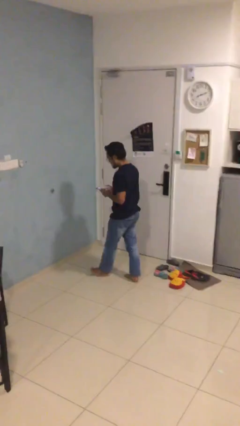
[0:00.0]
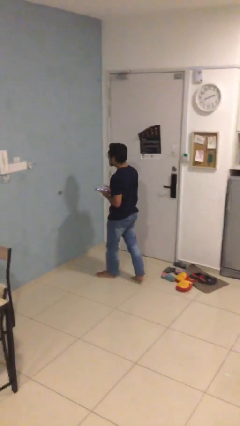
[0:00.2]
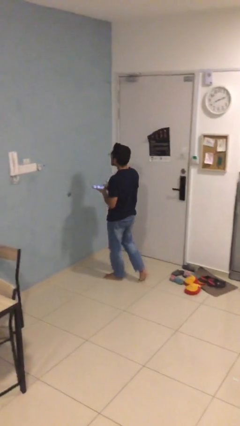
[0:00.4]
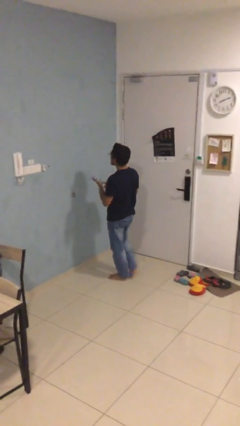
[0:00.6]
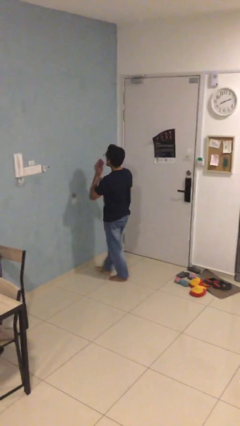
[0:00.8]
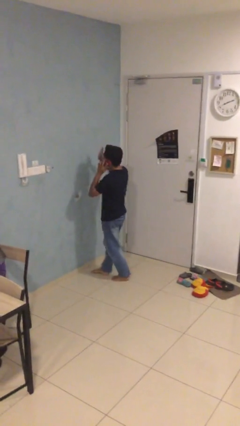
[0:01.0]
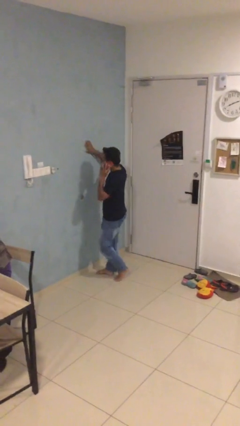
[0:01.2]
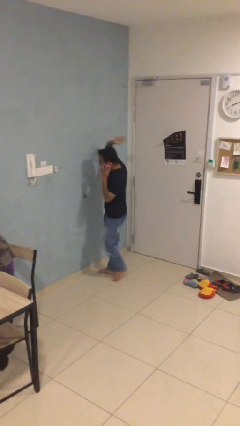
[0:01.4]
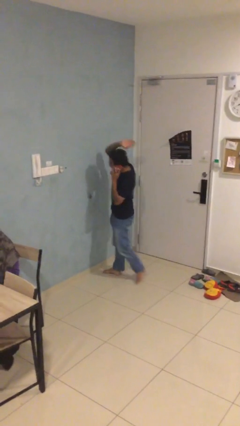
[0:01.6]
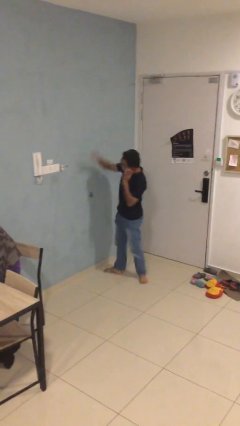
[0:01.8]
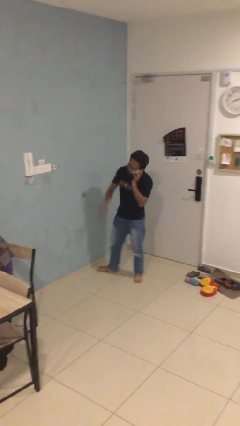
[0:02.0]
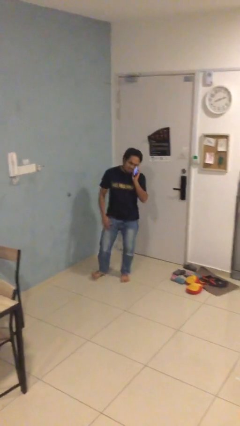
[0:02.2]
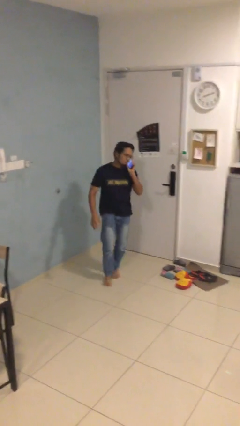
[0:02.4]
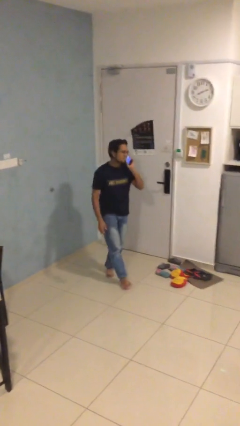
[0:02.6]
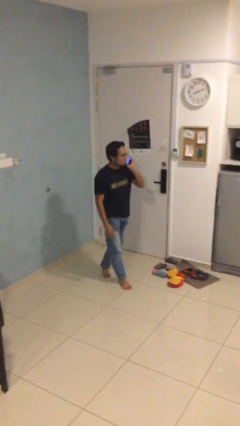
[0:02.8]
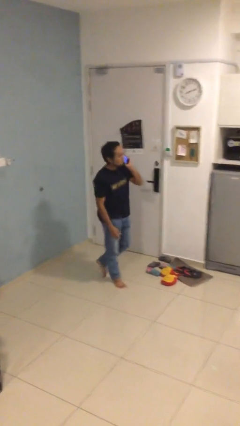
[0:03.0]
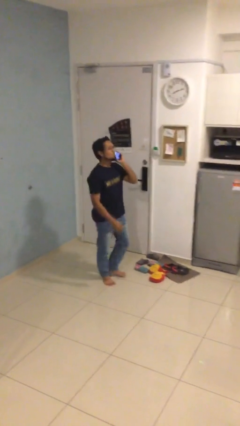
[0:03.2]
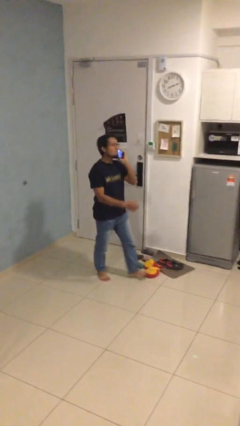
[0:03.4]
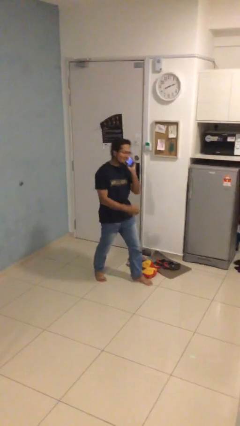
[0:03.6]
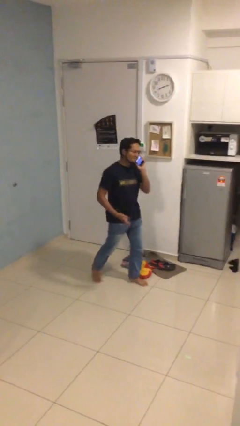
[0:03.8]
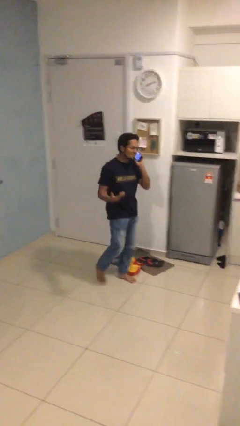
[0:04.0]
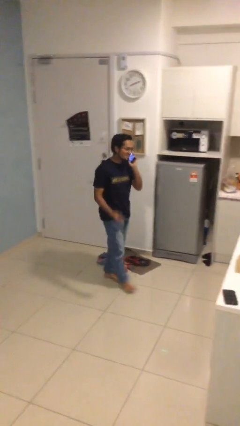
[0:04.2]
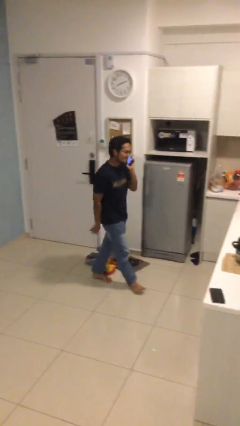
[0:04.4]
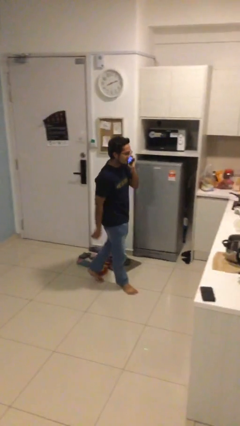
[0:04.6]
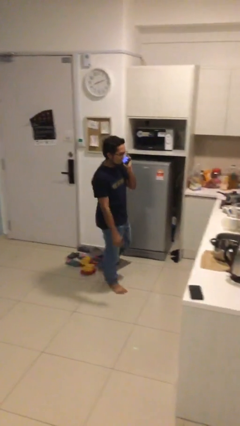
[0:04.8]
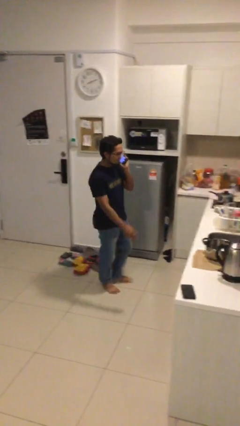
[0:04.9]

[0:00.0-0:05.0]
person talks on phone

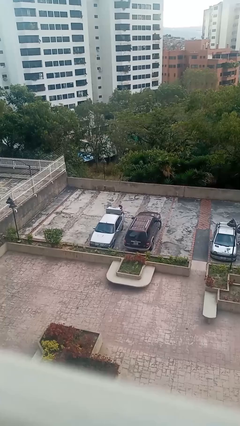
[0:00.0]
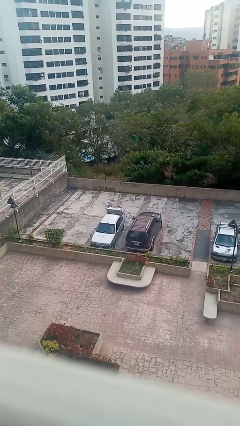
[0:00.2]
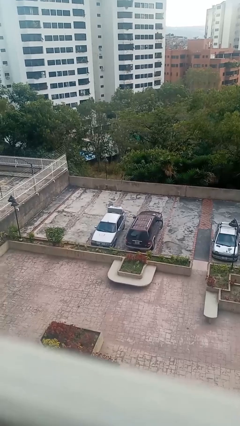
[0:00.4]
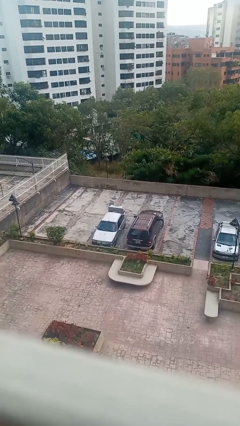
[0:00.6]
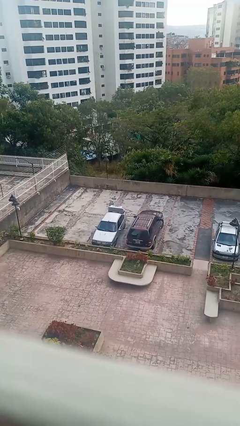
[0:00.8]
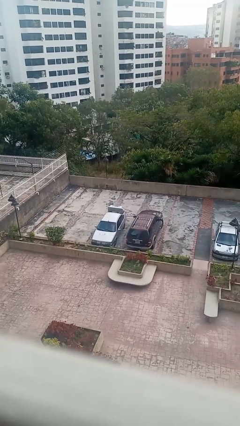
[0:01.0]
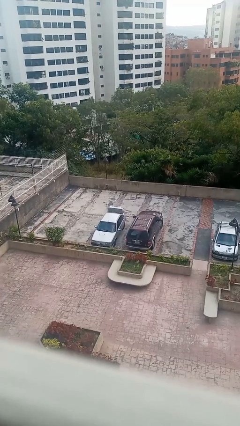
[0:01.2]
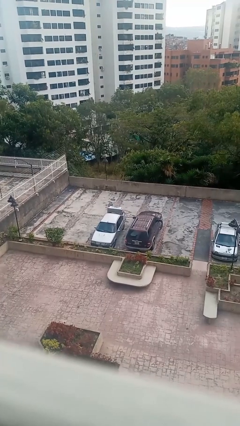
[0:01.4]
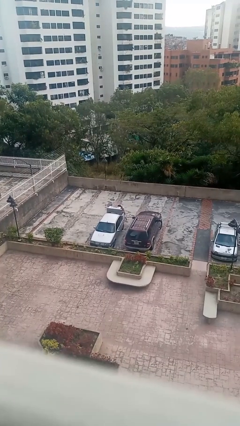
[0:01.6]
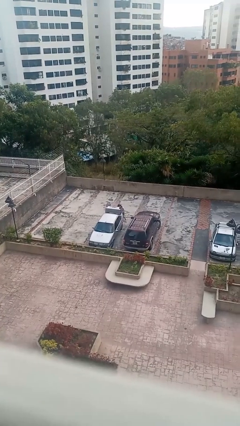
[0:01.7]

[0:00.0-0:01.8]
person loads car

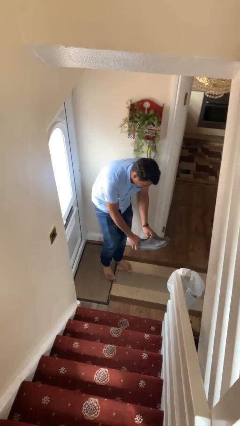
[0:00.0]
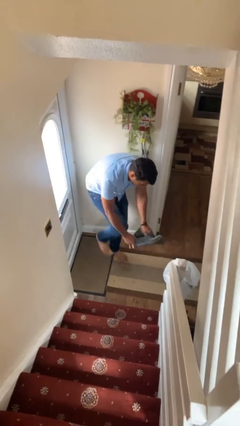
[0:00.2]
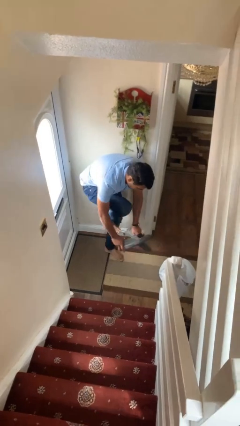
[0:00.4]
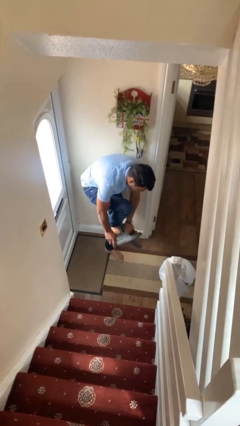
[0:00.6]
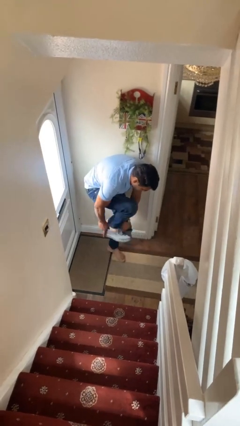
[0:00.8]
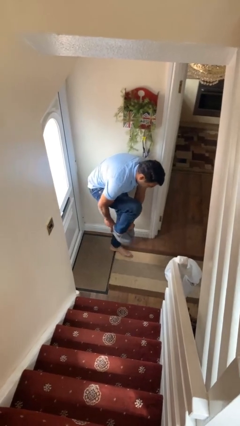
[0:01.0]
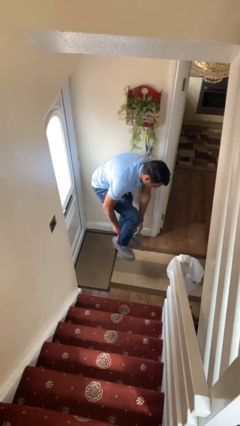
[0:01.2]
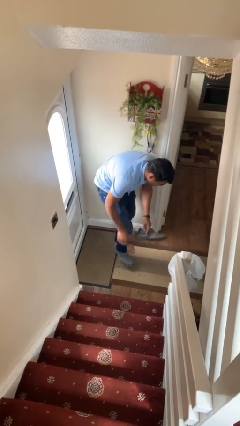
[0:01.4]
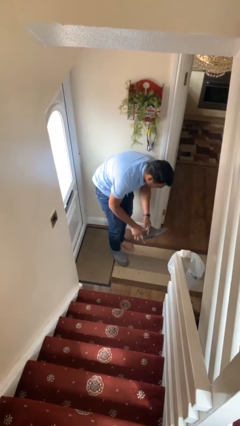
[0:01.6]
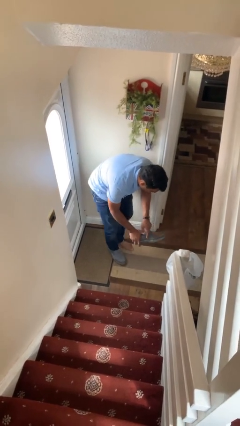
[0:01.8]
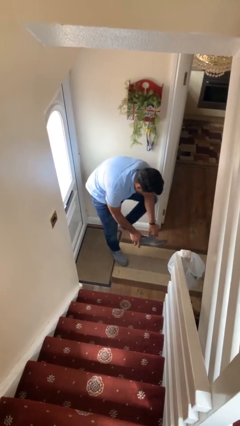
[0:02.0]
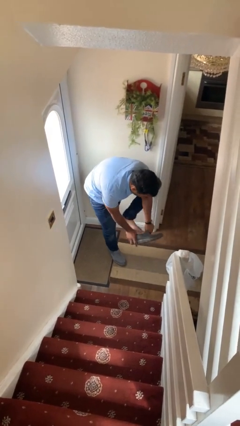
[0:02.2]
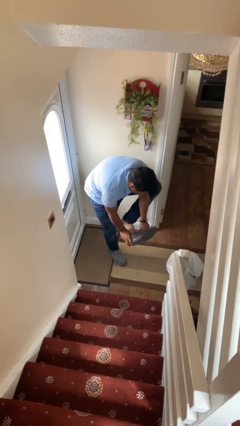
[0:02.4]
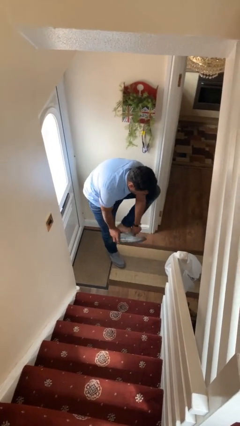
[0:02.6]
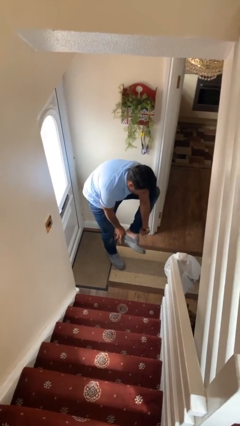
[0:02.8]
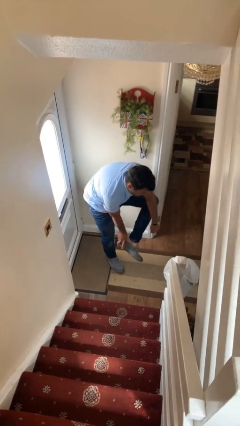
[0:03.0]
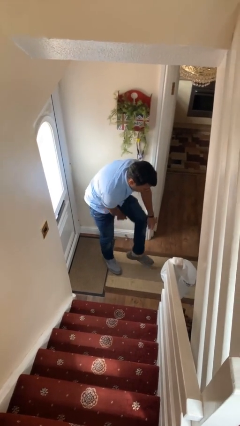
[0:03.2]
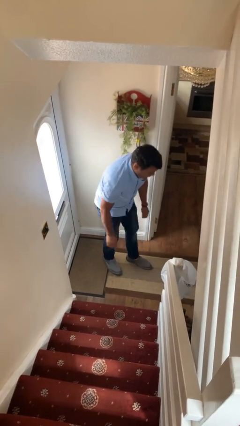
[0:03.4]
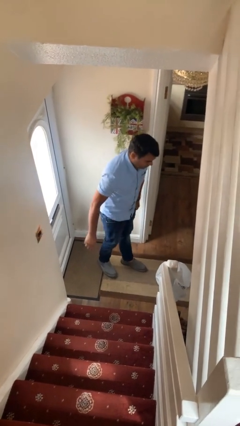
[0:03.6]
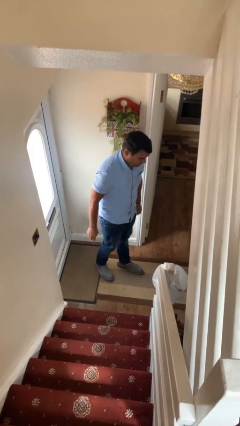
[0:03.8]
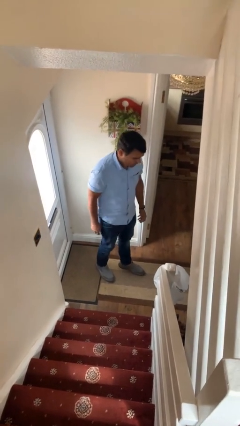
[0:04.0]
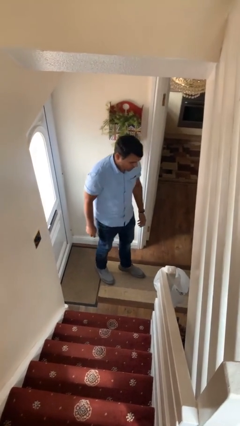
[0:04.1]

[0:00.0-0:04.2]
person puts on shoes

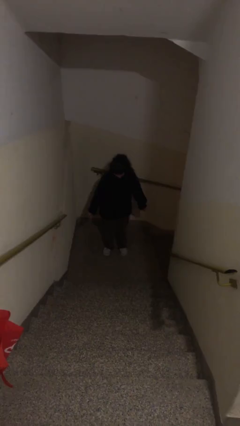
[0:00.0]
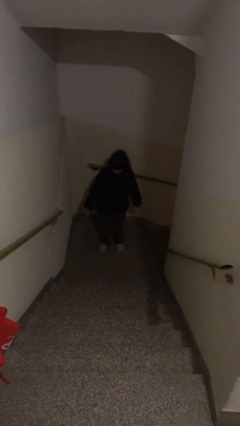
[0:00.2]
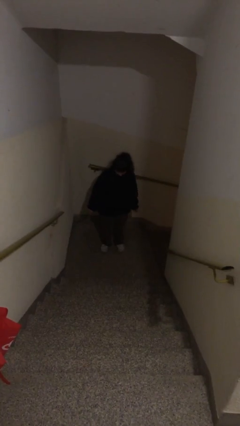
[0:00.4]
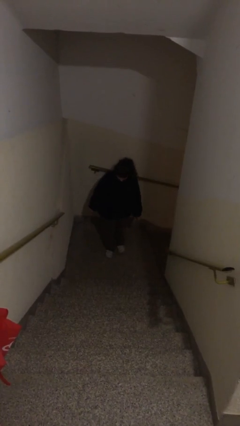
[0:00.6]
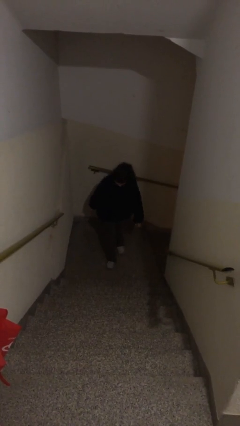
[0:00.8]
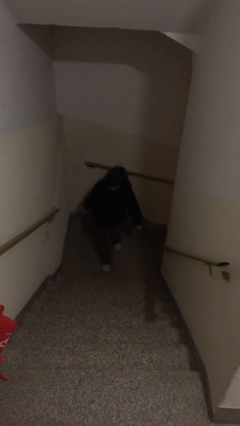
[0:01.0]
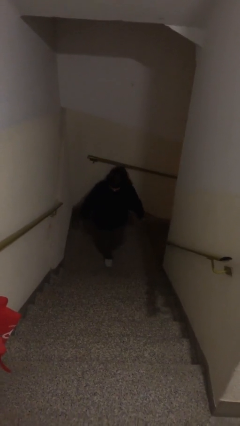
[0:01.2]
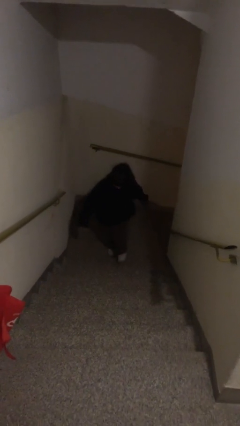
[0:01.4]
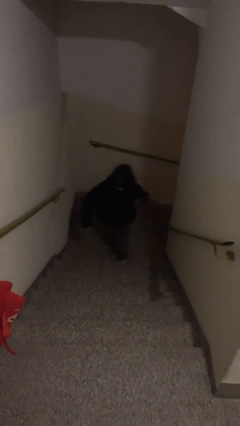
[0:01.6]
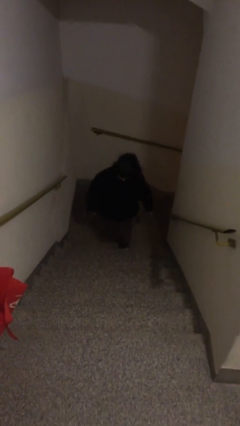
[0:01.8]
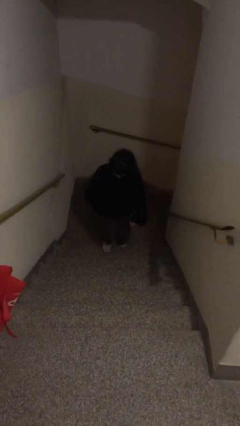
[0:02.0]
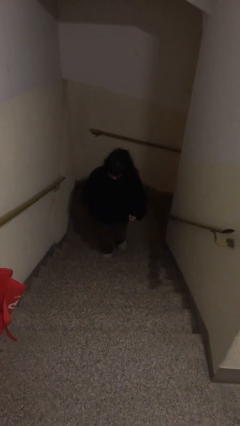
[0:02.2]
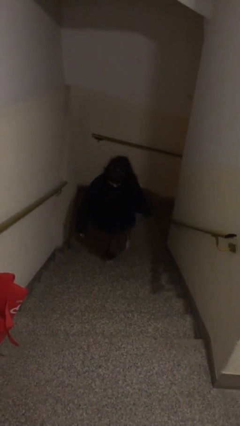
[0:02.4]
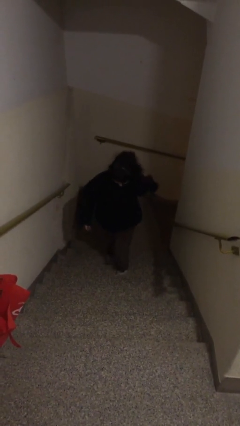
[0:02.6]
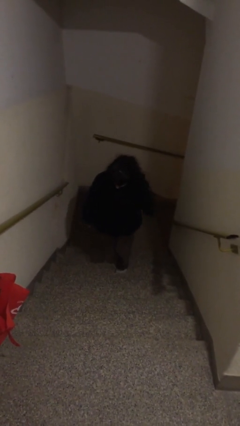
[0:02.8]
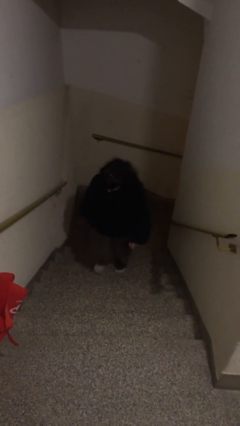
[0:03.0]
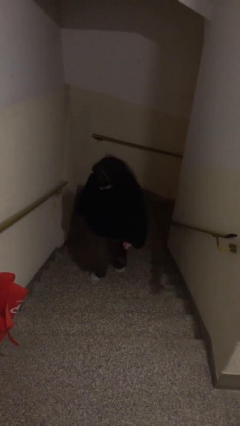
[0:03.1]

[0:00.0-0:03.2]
person climbs up stairs

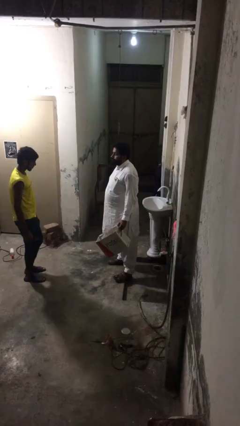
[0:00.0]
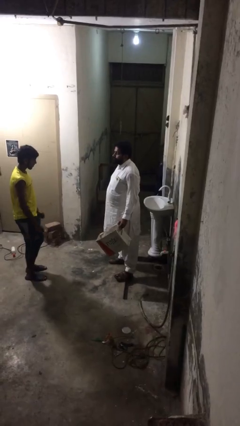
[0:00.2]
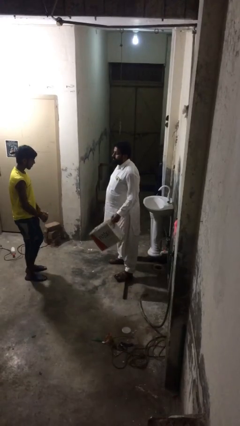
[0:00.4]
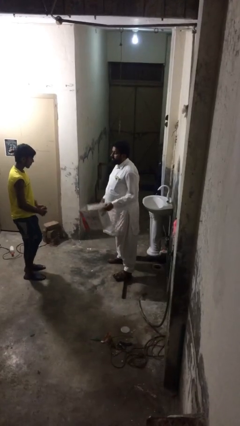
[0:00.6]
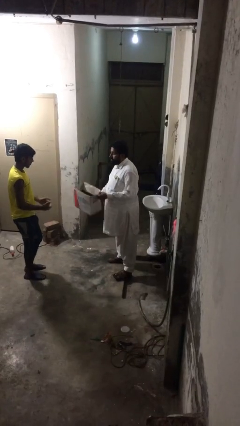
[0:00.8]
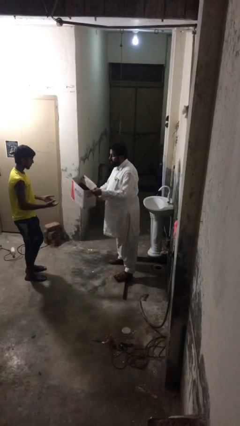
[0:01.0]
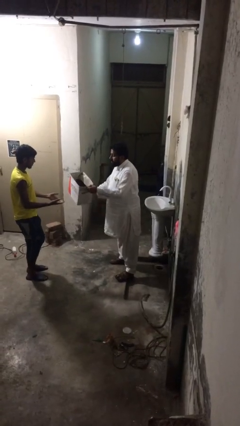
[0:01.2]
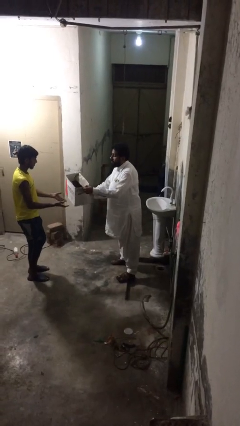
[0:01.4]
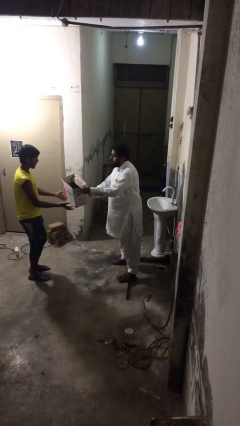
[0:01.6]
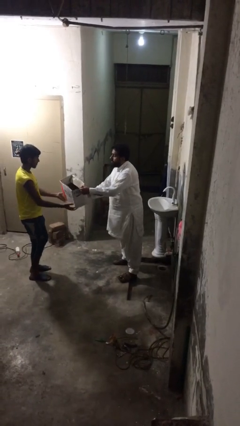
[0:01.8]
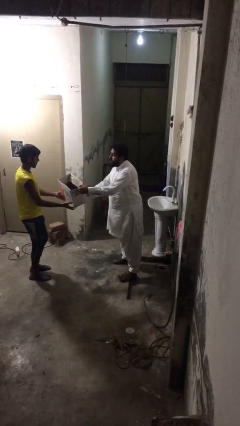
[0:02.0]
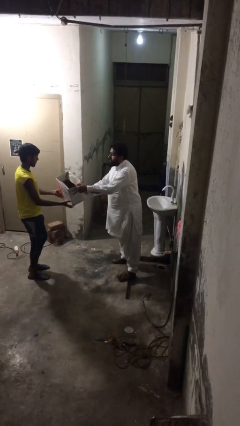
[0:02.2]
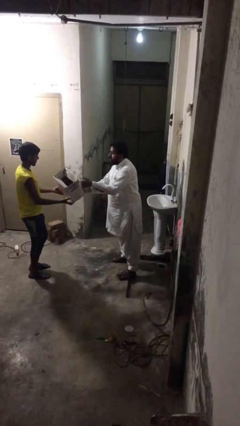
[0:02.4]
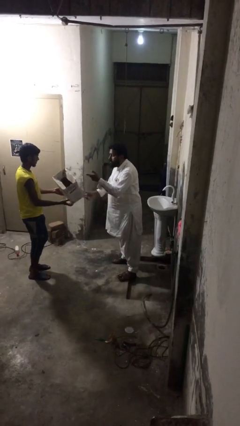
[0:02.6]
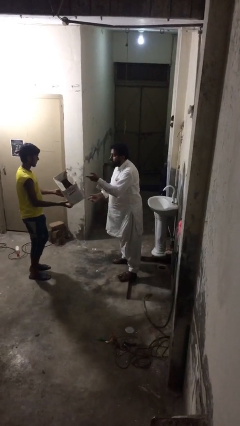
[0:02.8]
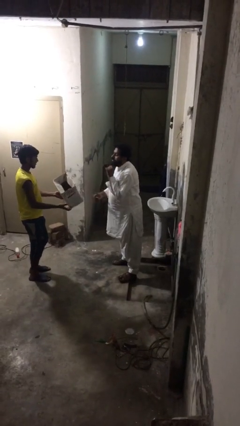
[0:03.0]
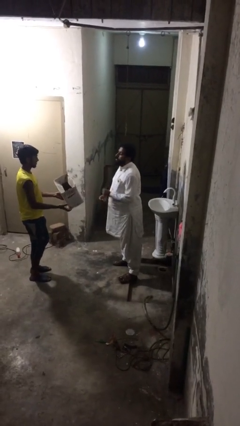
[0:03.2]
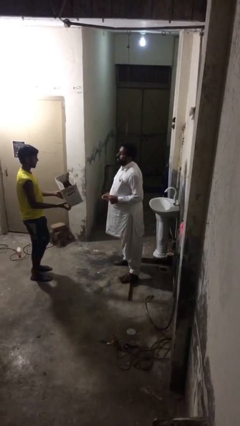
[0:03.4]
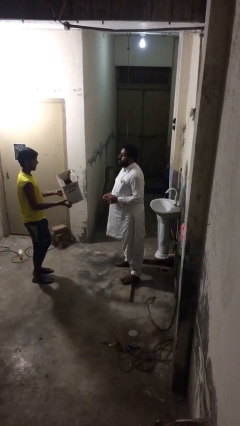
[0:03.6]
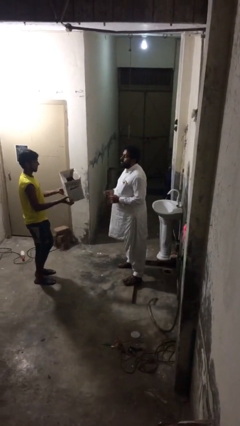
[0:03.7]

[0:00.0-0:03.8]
person transfers object to person
